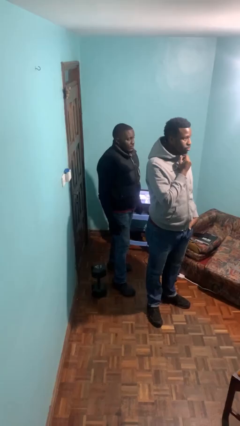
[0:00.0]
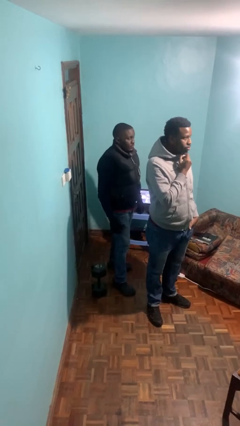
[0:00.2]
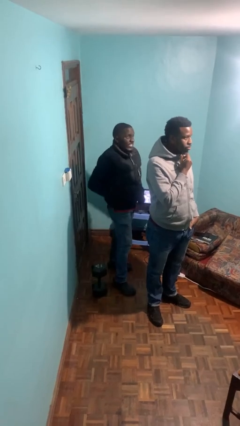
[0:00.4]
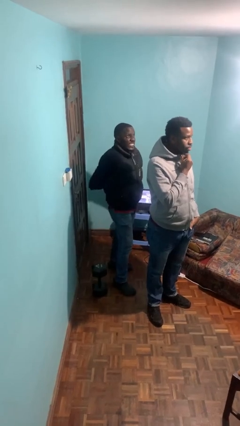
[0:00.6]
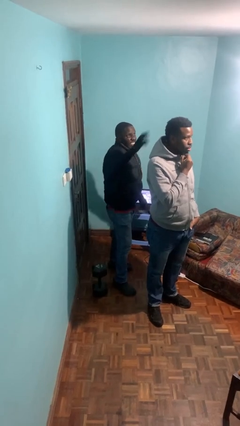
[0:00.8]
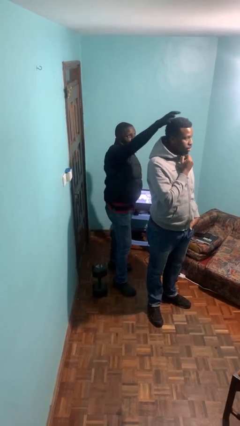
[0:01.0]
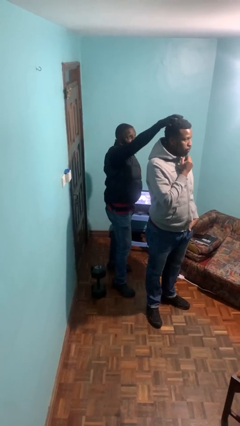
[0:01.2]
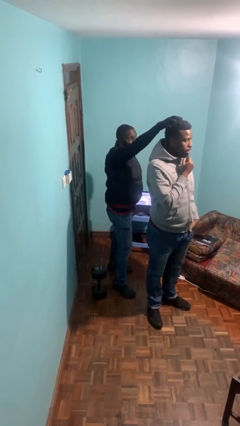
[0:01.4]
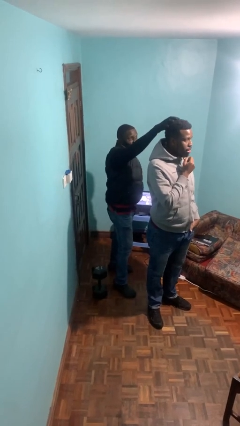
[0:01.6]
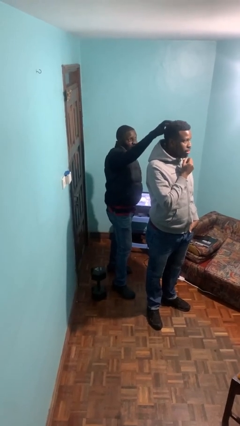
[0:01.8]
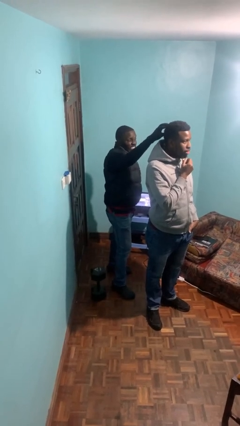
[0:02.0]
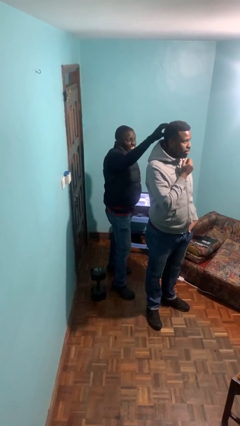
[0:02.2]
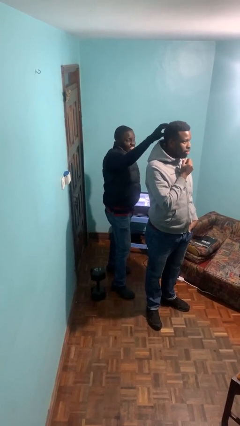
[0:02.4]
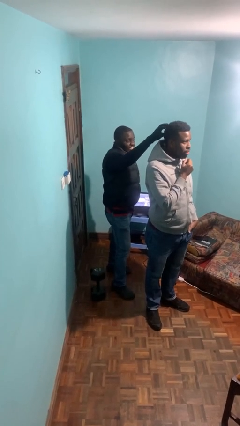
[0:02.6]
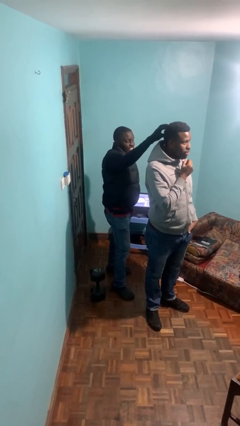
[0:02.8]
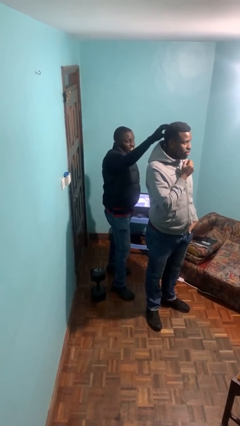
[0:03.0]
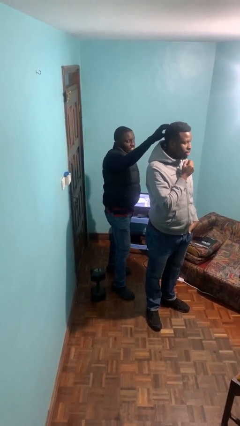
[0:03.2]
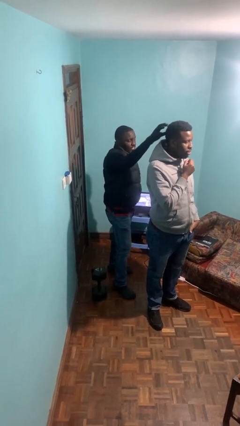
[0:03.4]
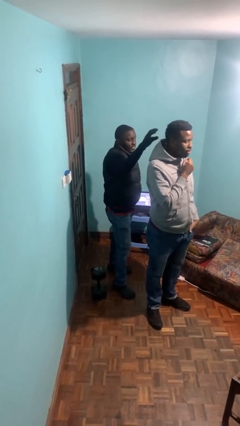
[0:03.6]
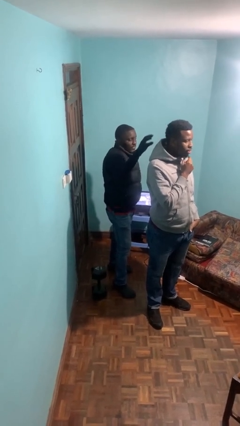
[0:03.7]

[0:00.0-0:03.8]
person grabs person by hair

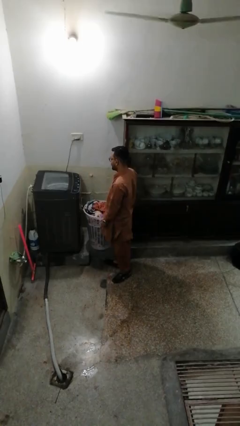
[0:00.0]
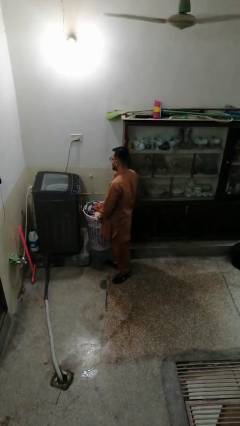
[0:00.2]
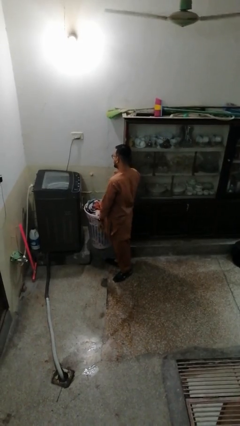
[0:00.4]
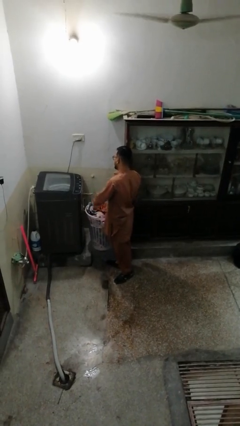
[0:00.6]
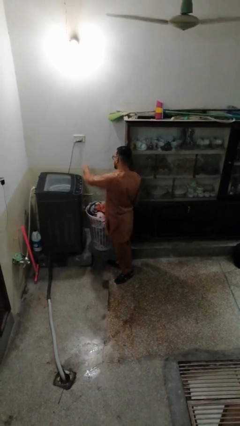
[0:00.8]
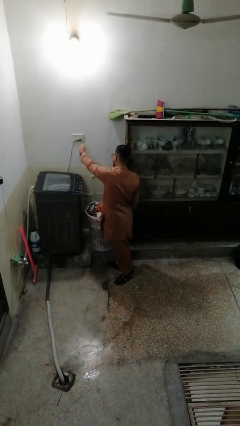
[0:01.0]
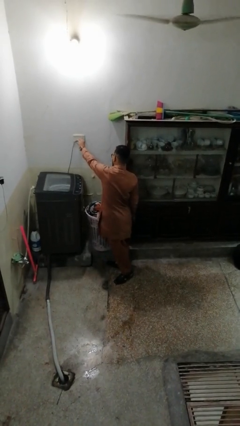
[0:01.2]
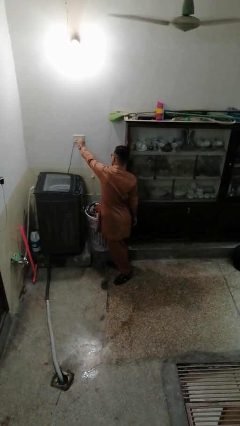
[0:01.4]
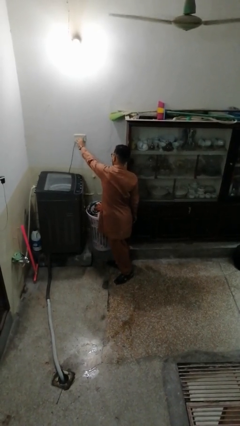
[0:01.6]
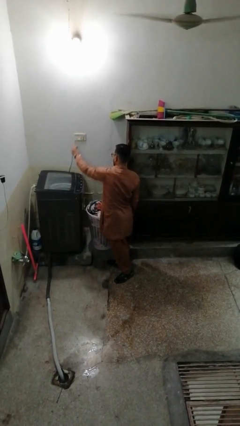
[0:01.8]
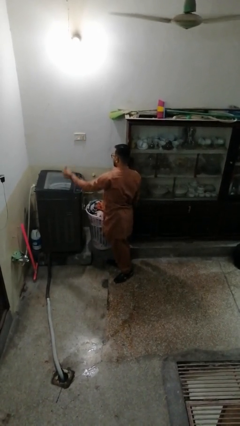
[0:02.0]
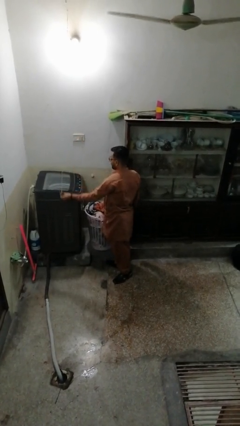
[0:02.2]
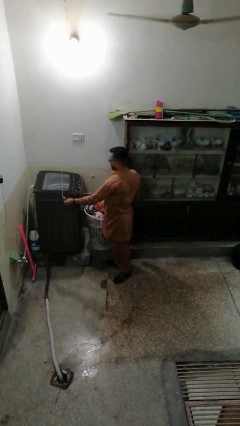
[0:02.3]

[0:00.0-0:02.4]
person unplugs from electrical socket

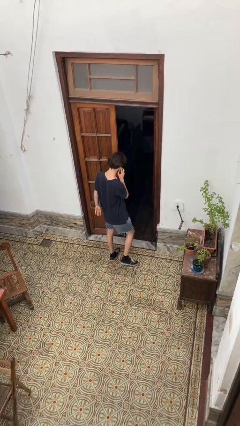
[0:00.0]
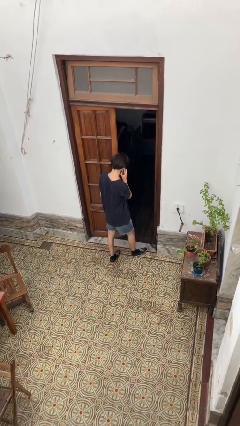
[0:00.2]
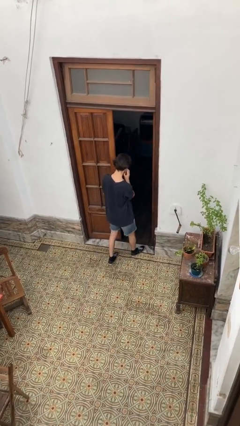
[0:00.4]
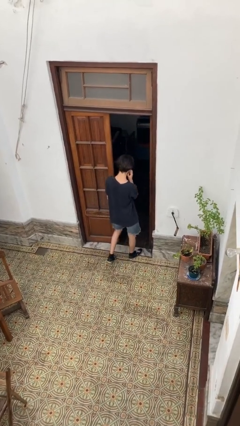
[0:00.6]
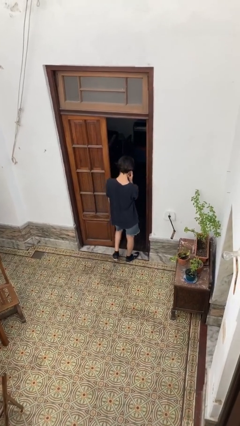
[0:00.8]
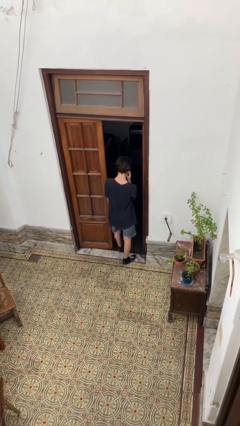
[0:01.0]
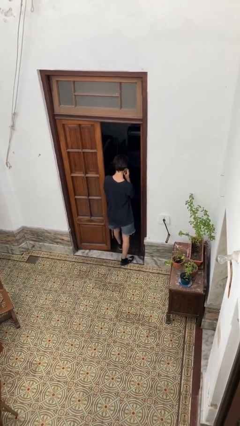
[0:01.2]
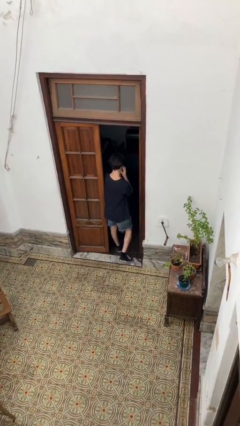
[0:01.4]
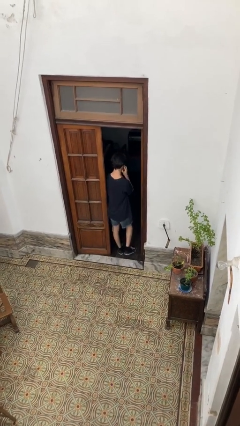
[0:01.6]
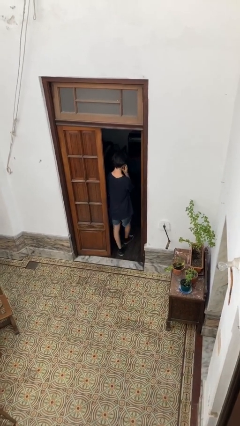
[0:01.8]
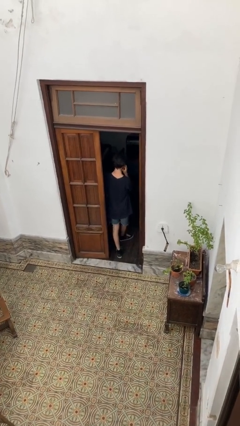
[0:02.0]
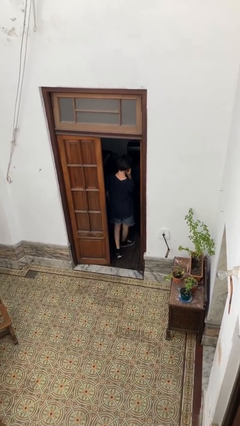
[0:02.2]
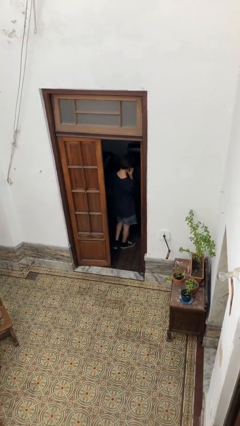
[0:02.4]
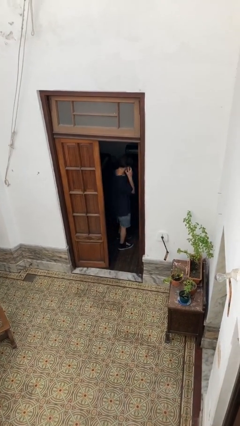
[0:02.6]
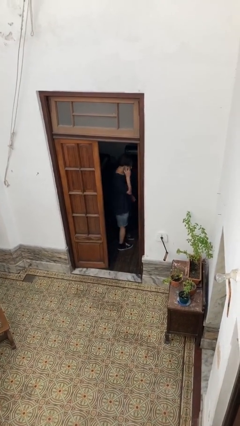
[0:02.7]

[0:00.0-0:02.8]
person exits scene through structure

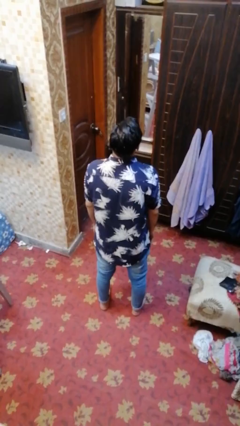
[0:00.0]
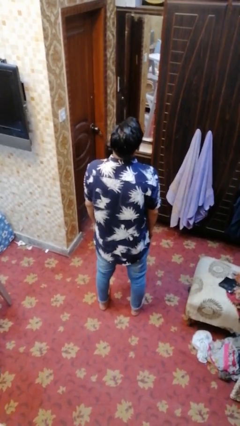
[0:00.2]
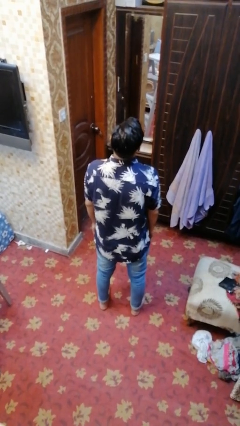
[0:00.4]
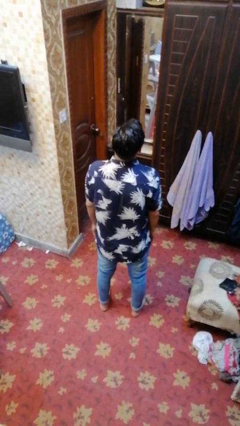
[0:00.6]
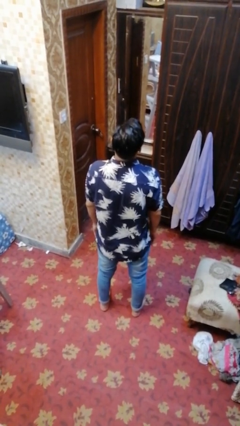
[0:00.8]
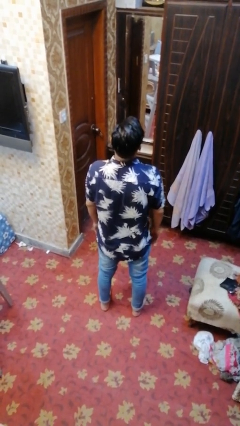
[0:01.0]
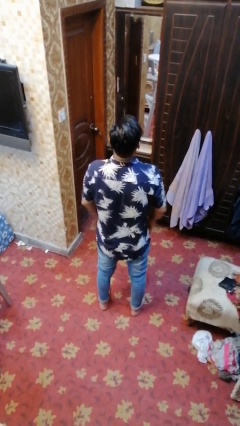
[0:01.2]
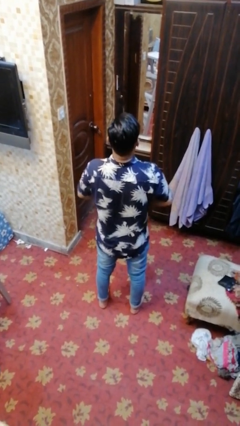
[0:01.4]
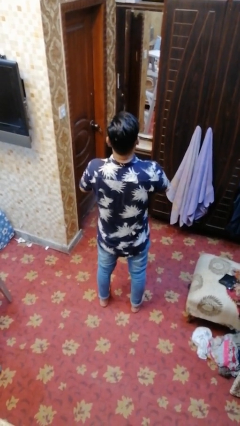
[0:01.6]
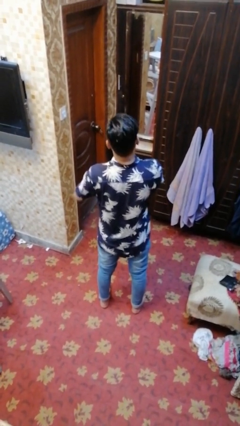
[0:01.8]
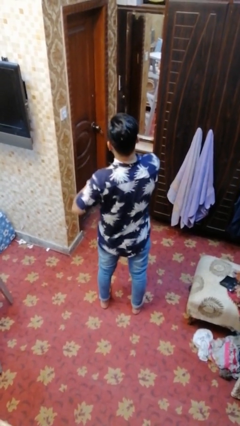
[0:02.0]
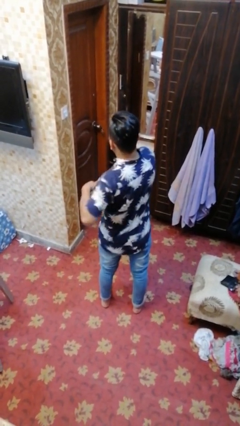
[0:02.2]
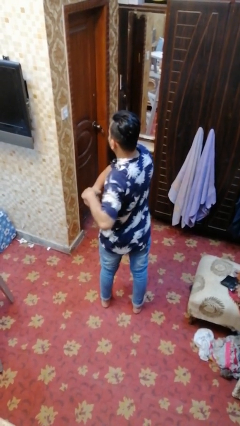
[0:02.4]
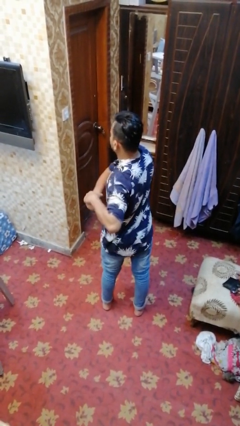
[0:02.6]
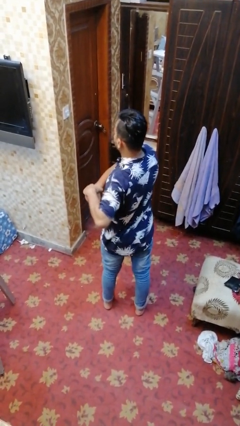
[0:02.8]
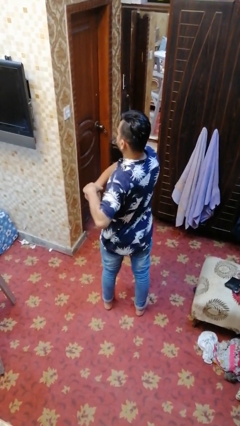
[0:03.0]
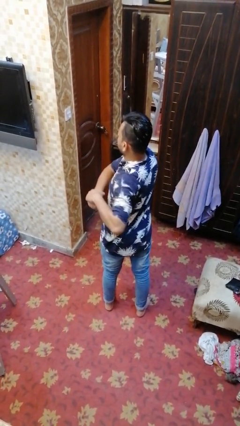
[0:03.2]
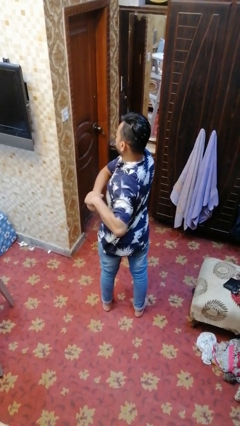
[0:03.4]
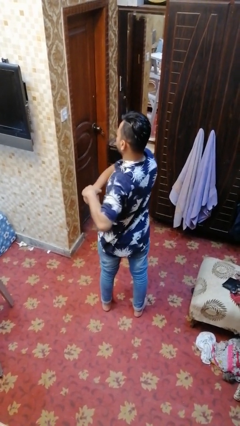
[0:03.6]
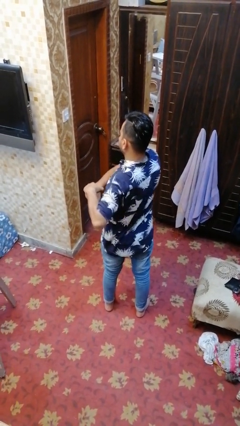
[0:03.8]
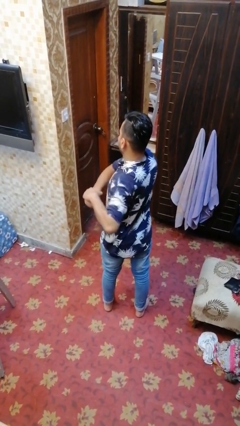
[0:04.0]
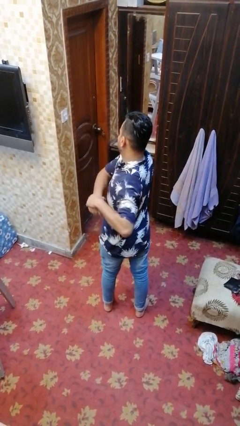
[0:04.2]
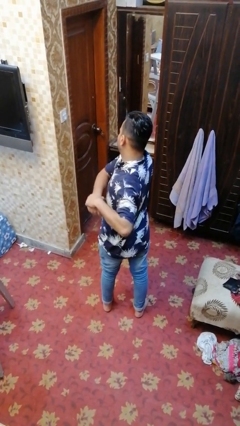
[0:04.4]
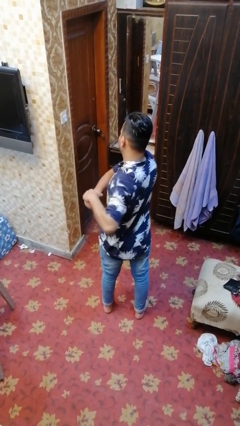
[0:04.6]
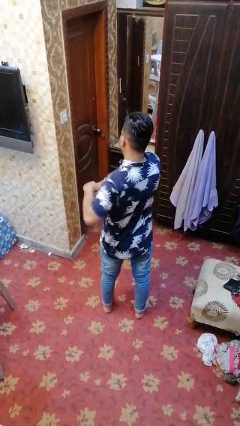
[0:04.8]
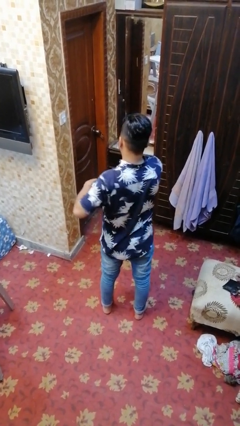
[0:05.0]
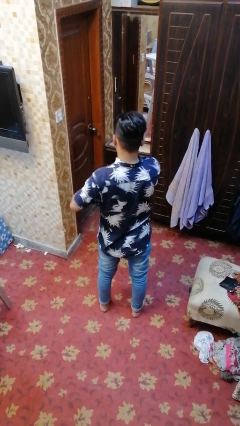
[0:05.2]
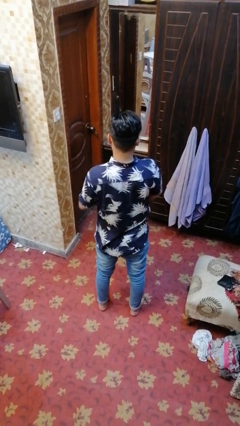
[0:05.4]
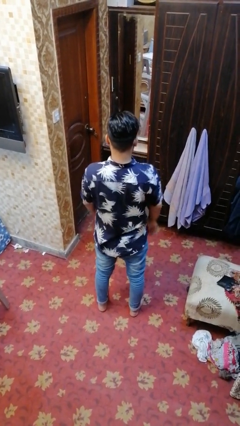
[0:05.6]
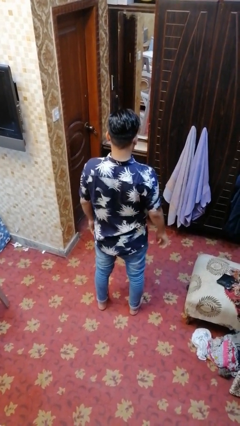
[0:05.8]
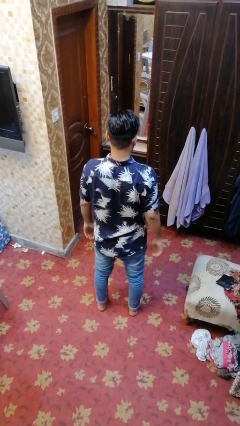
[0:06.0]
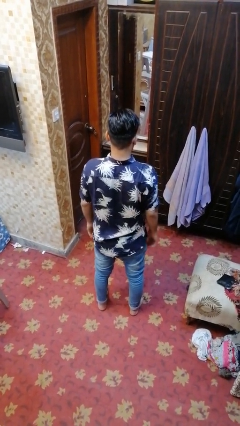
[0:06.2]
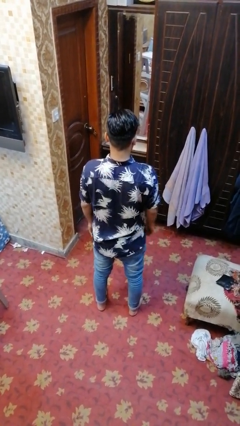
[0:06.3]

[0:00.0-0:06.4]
person stretches arms to side

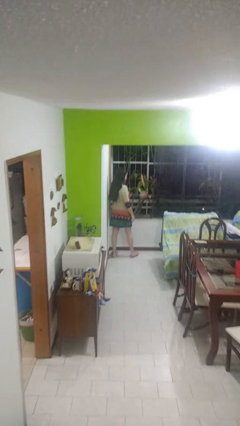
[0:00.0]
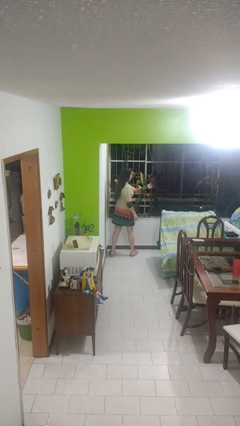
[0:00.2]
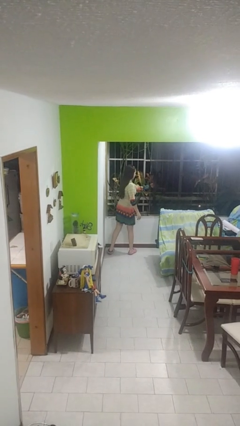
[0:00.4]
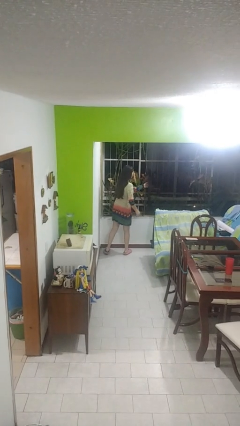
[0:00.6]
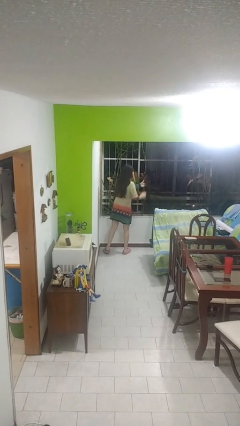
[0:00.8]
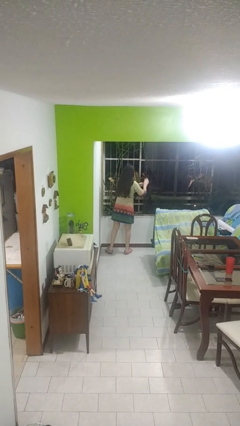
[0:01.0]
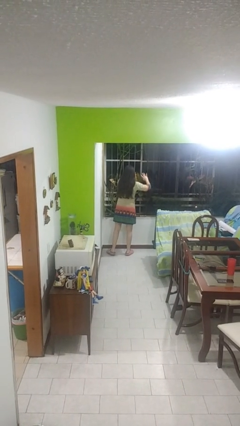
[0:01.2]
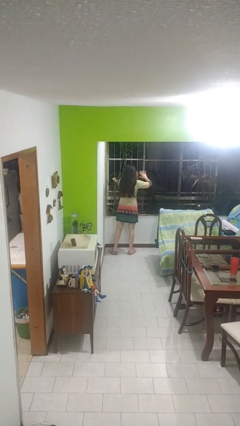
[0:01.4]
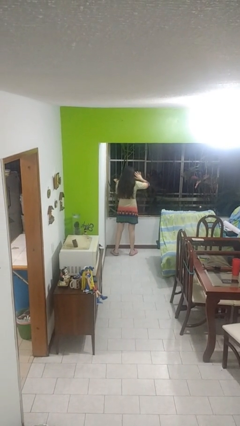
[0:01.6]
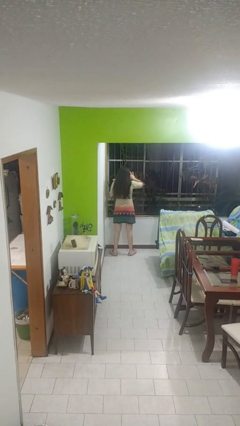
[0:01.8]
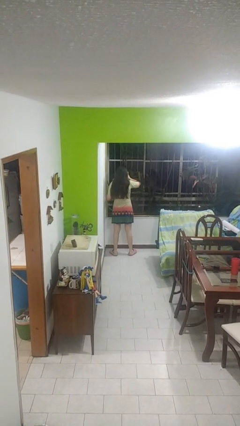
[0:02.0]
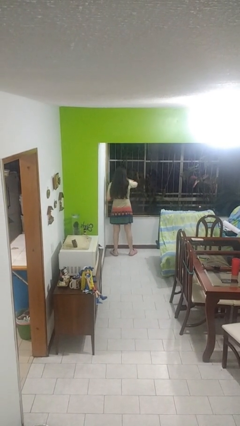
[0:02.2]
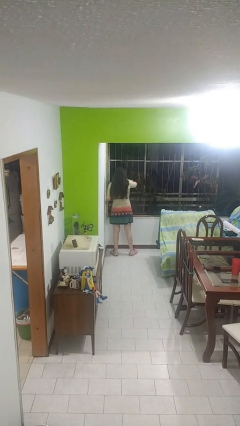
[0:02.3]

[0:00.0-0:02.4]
person closes home window
